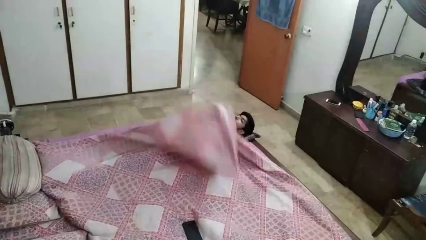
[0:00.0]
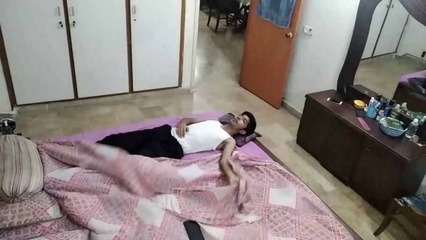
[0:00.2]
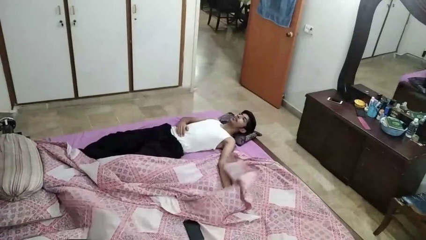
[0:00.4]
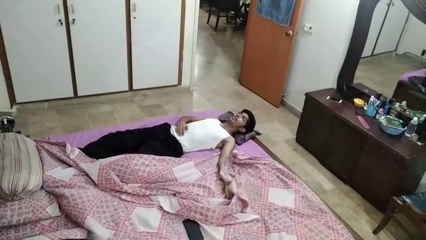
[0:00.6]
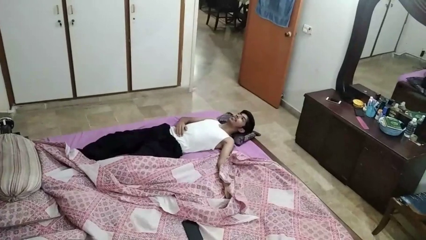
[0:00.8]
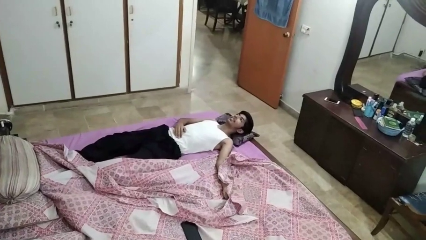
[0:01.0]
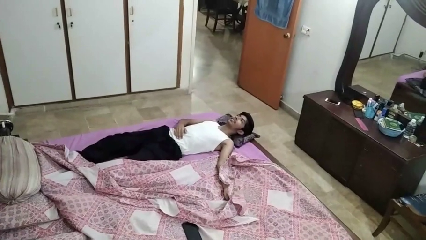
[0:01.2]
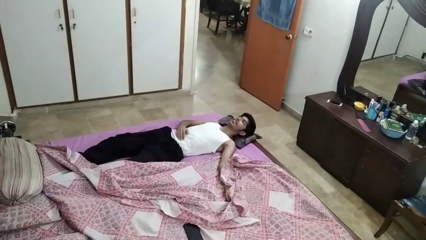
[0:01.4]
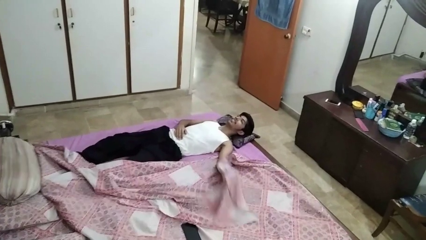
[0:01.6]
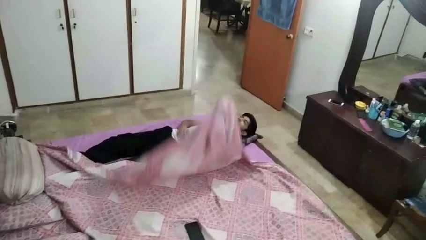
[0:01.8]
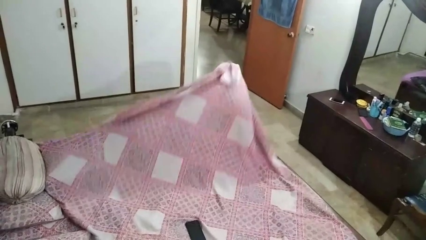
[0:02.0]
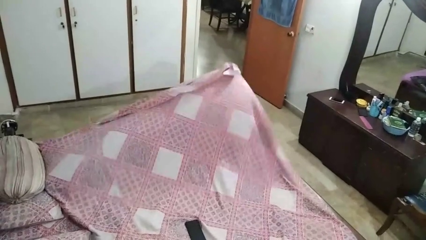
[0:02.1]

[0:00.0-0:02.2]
person uncovers with bedsheets

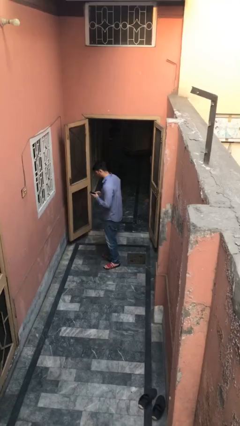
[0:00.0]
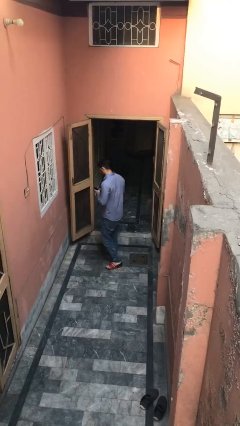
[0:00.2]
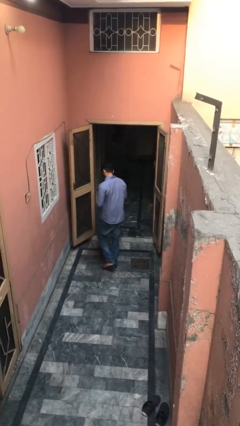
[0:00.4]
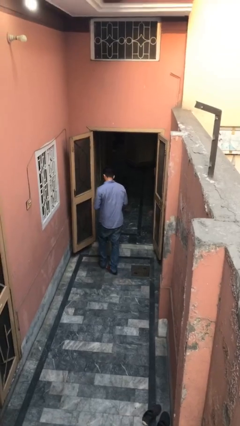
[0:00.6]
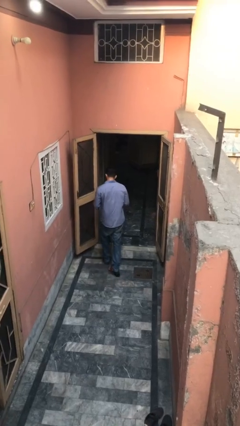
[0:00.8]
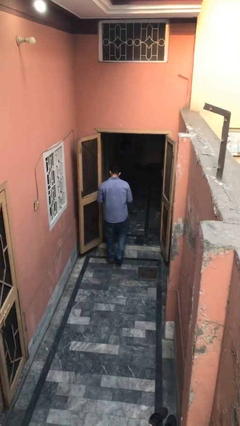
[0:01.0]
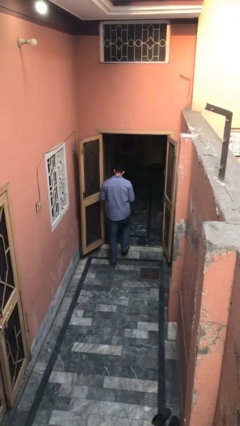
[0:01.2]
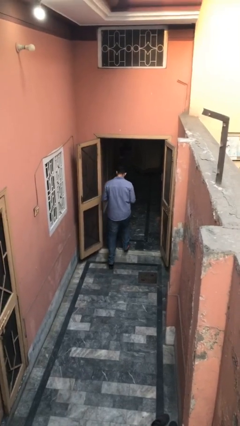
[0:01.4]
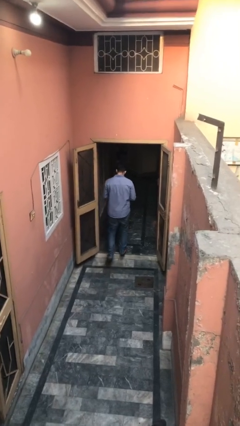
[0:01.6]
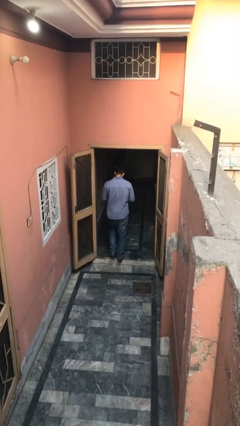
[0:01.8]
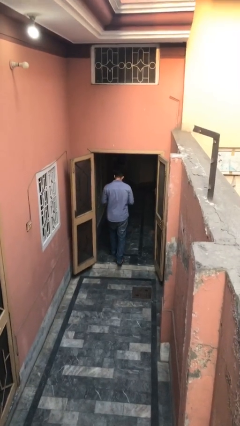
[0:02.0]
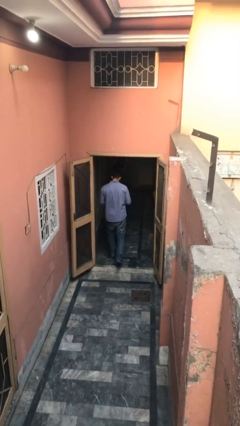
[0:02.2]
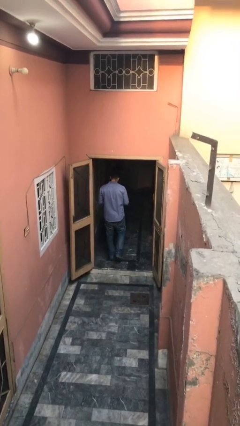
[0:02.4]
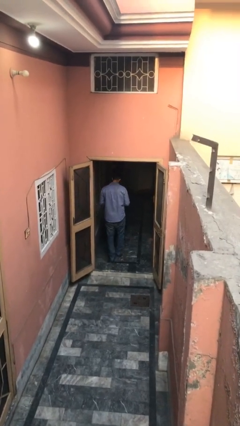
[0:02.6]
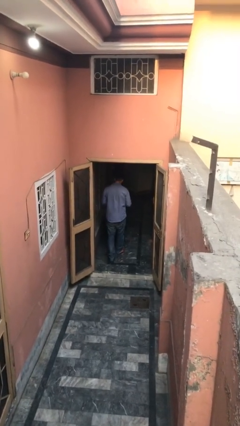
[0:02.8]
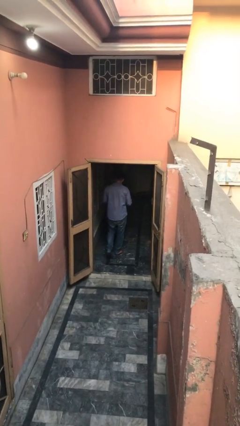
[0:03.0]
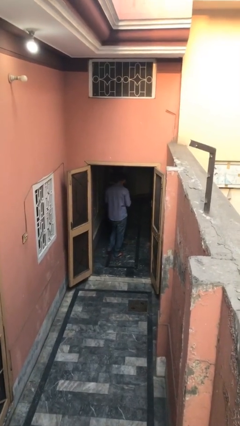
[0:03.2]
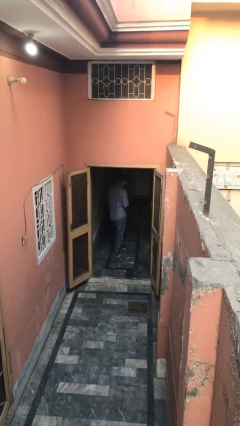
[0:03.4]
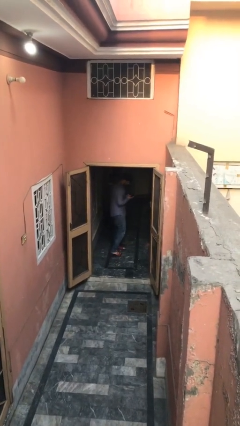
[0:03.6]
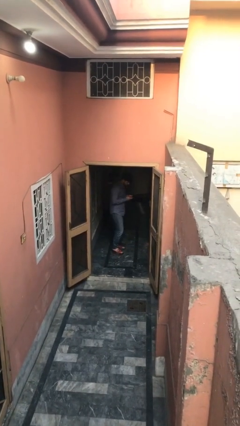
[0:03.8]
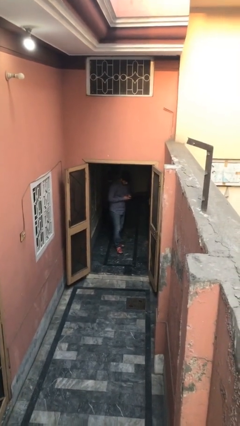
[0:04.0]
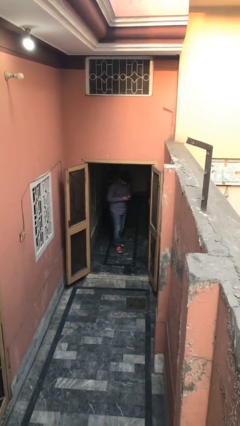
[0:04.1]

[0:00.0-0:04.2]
person exits scene through structure

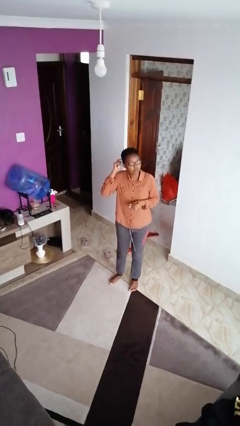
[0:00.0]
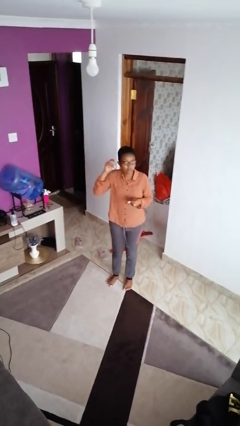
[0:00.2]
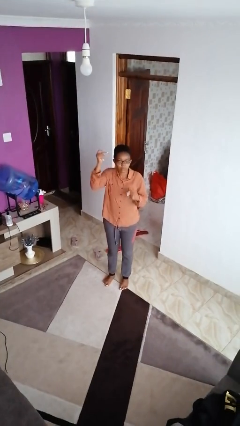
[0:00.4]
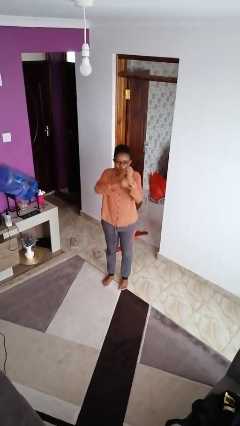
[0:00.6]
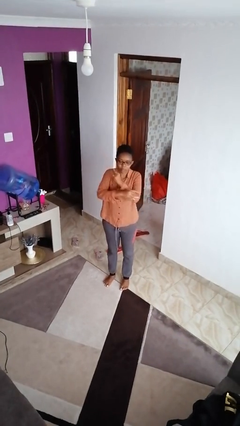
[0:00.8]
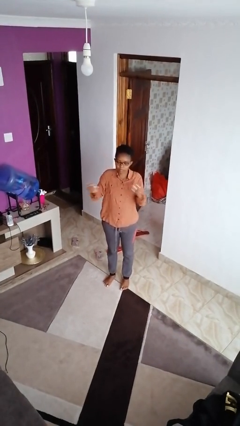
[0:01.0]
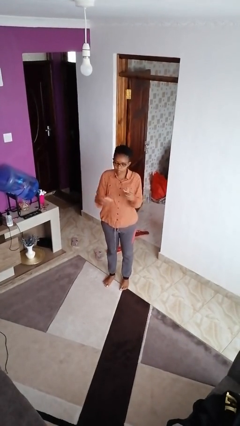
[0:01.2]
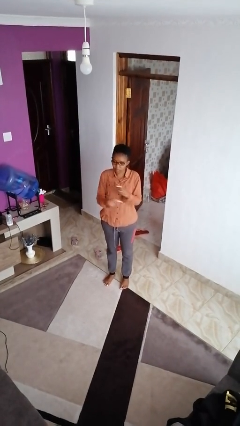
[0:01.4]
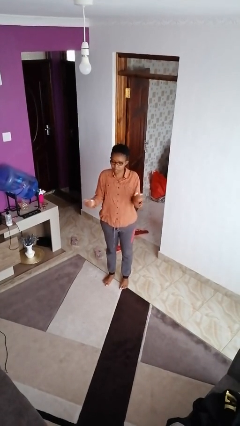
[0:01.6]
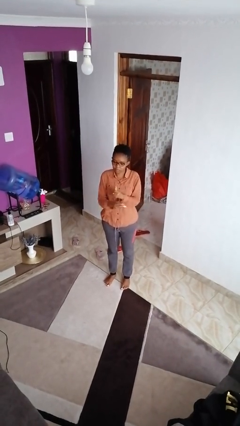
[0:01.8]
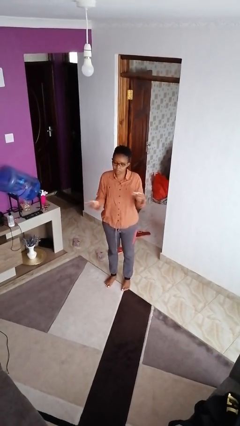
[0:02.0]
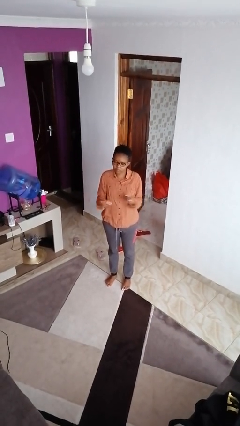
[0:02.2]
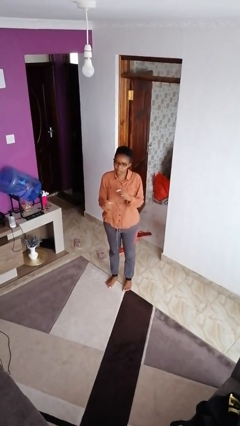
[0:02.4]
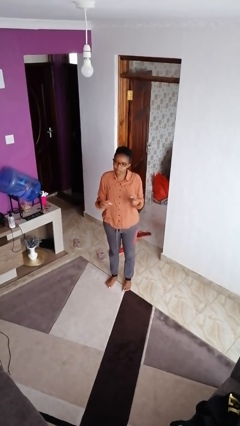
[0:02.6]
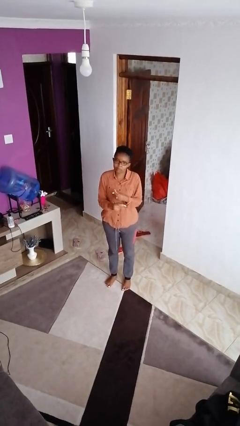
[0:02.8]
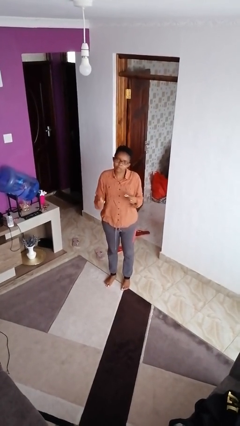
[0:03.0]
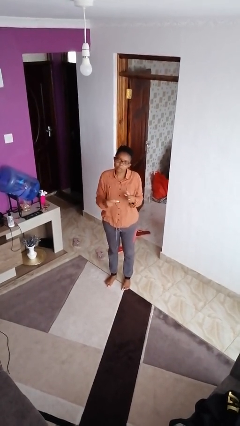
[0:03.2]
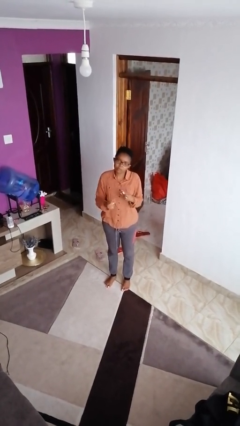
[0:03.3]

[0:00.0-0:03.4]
person snaps fingers

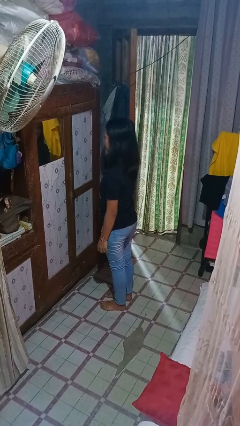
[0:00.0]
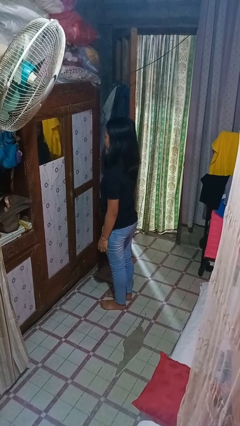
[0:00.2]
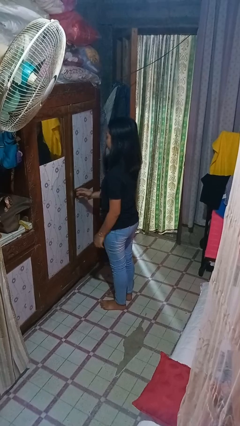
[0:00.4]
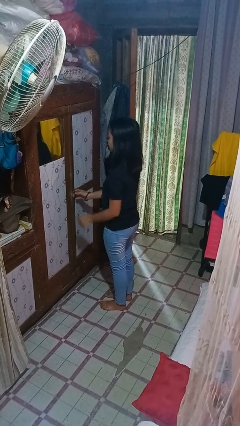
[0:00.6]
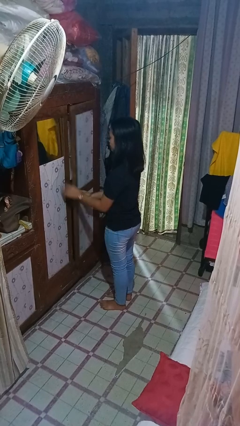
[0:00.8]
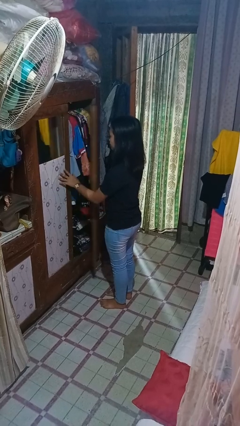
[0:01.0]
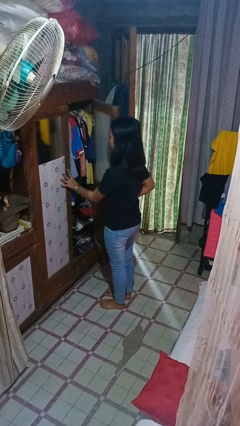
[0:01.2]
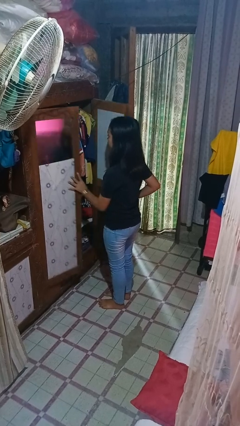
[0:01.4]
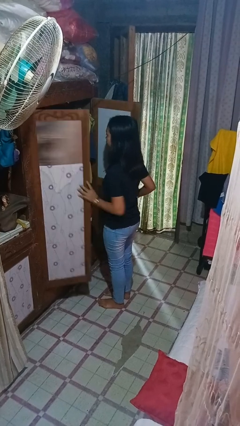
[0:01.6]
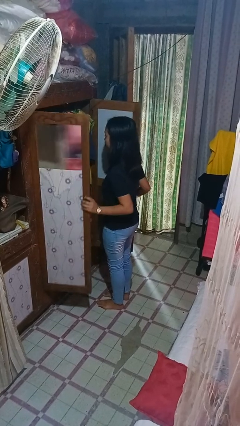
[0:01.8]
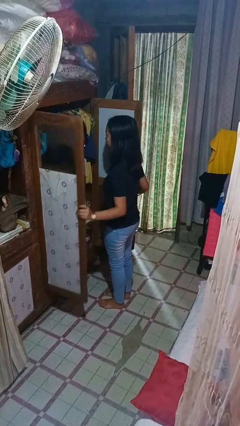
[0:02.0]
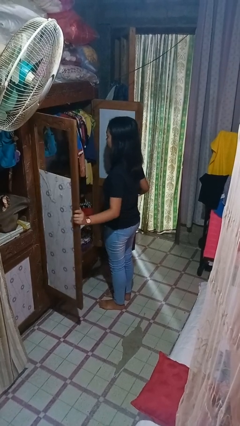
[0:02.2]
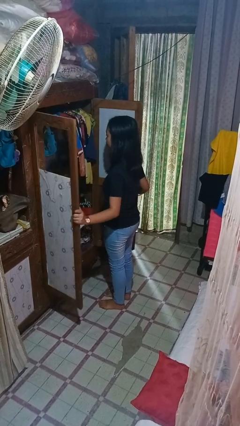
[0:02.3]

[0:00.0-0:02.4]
person opens closet door

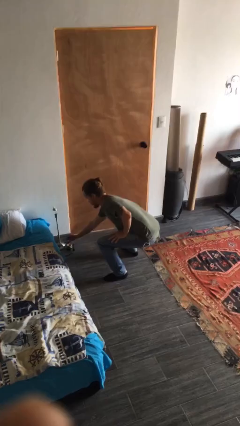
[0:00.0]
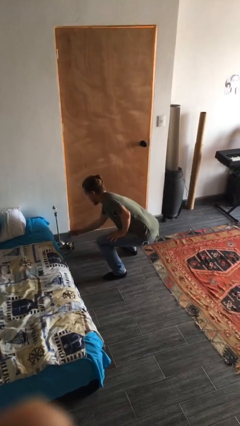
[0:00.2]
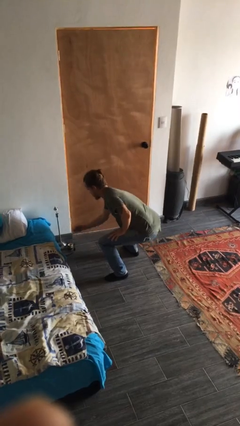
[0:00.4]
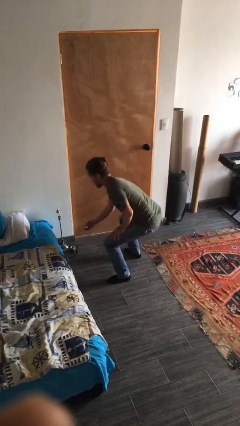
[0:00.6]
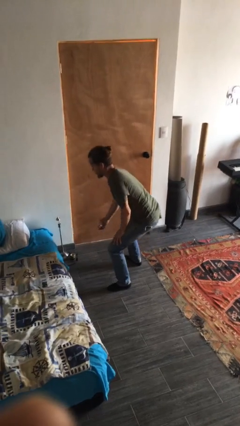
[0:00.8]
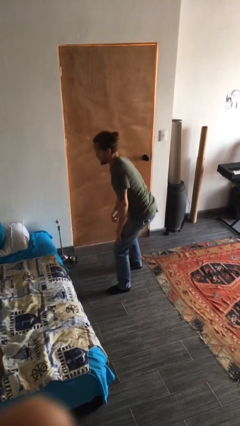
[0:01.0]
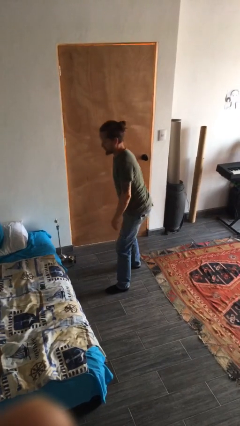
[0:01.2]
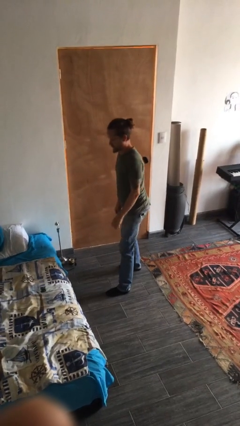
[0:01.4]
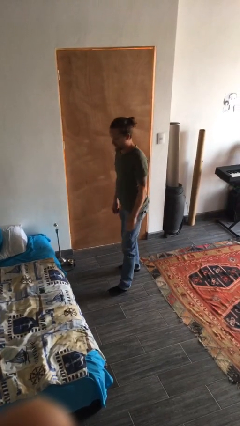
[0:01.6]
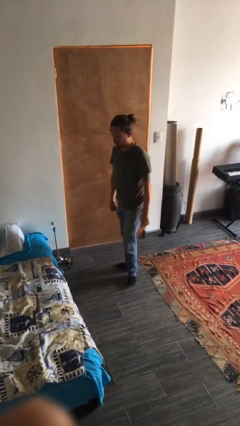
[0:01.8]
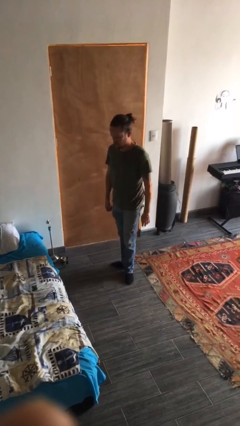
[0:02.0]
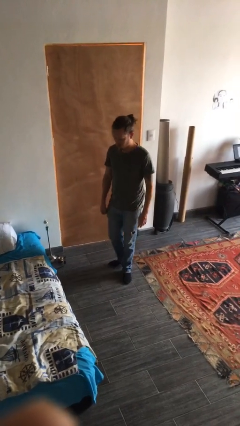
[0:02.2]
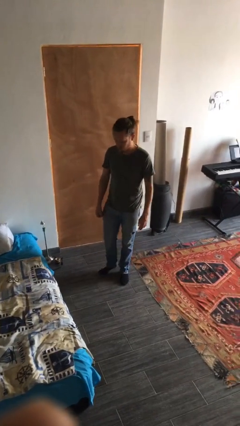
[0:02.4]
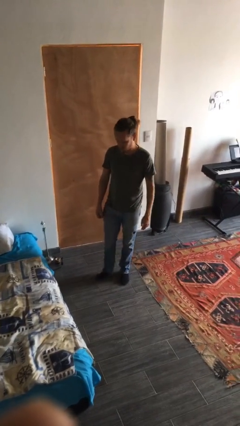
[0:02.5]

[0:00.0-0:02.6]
person stands up

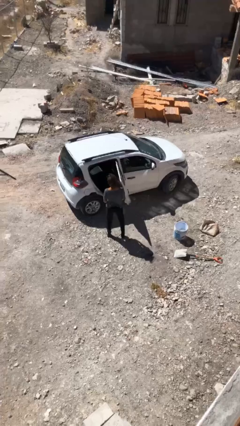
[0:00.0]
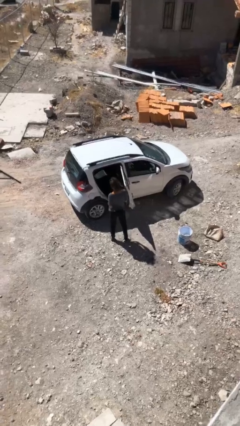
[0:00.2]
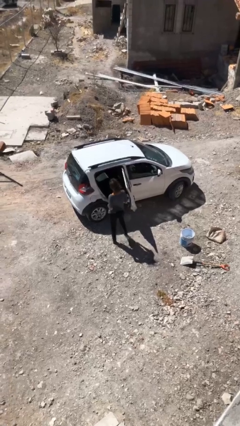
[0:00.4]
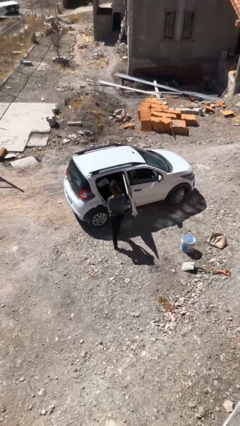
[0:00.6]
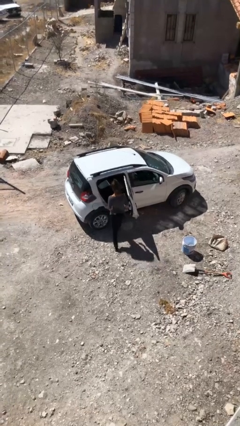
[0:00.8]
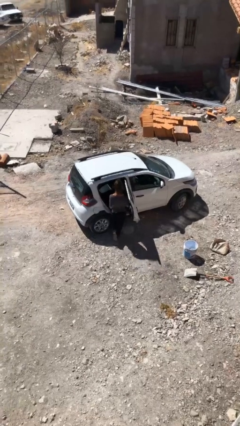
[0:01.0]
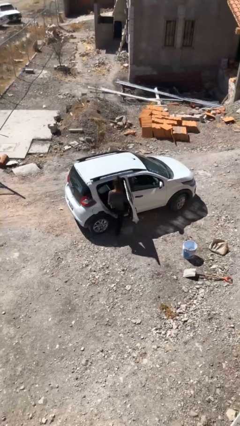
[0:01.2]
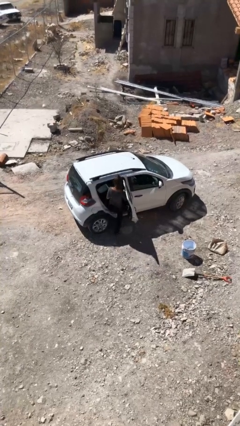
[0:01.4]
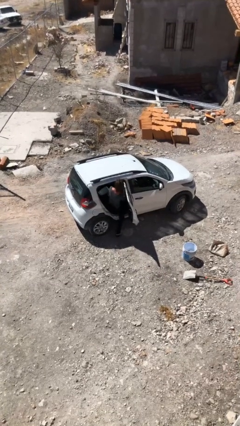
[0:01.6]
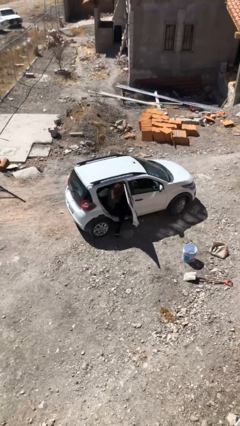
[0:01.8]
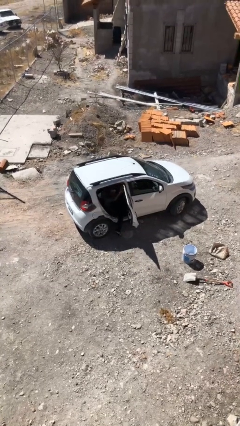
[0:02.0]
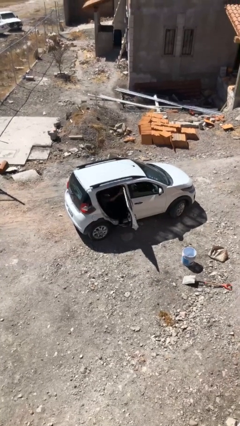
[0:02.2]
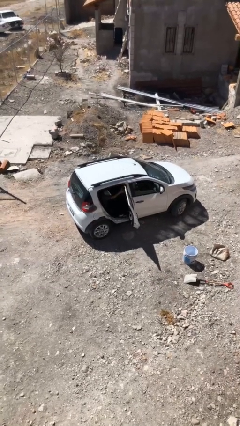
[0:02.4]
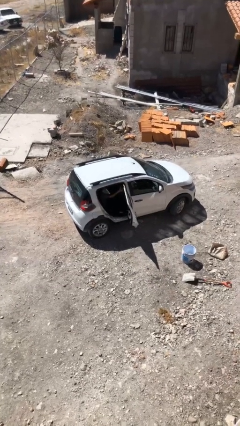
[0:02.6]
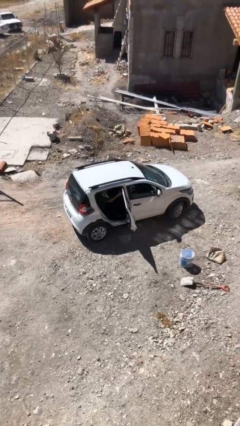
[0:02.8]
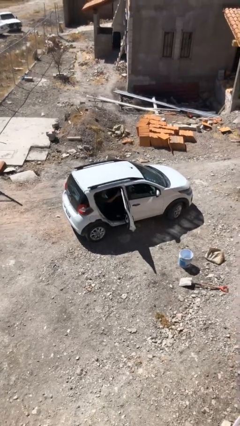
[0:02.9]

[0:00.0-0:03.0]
person enters car
